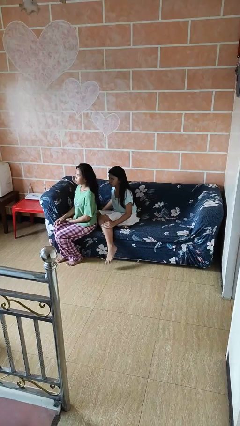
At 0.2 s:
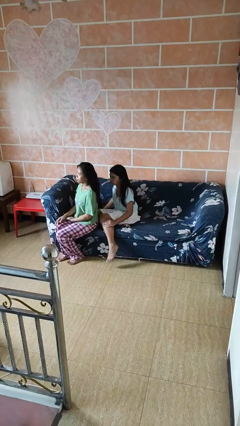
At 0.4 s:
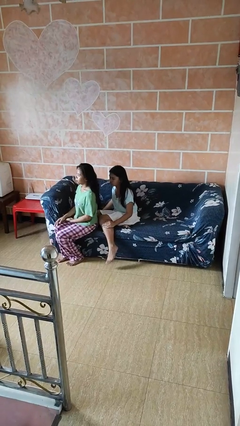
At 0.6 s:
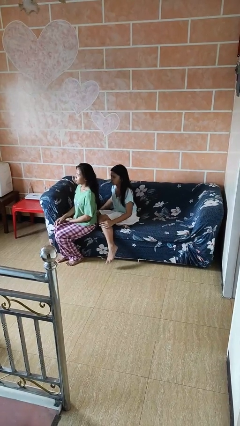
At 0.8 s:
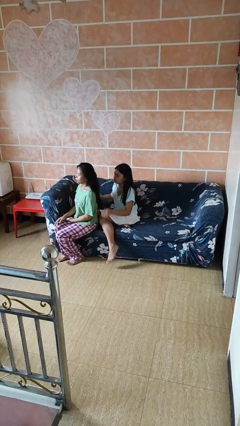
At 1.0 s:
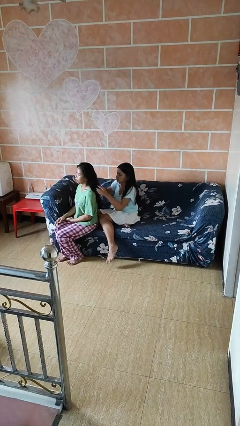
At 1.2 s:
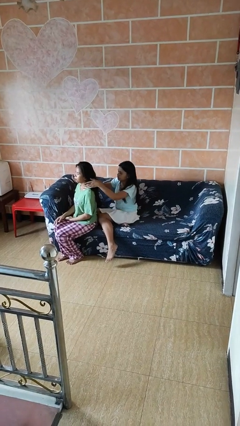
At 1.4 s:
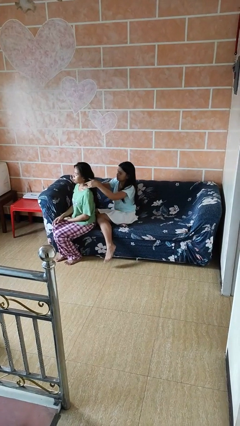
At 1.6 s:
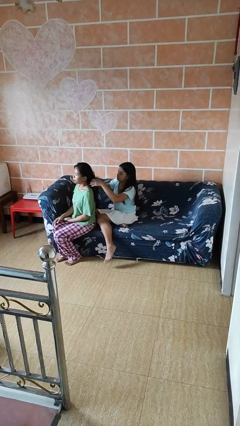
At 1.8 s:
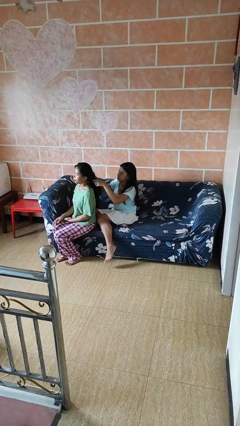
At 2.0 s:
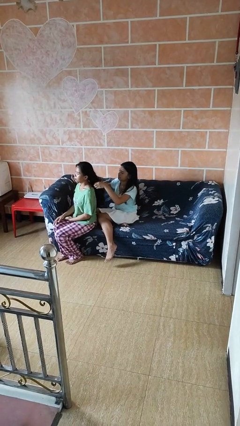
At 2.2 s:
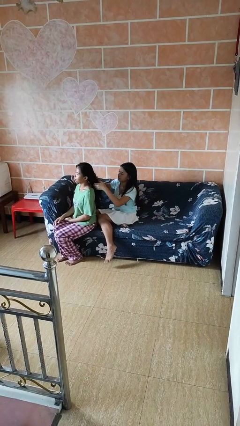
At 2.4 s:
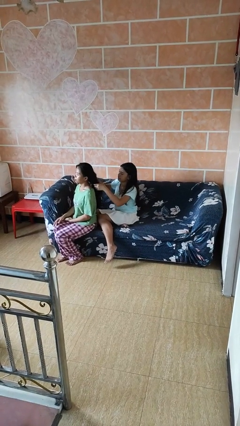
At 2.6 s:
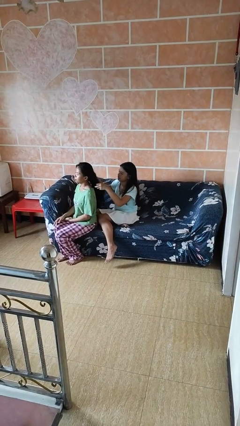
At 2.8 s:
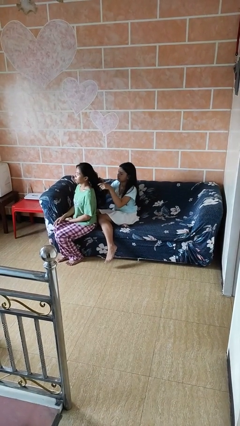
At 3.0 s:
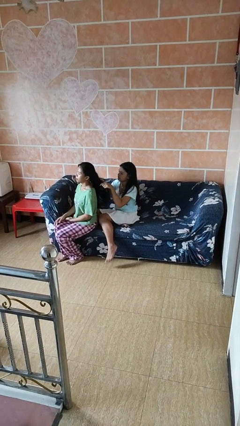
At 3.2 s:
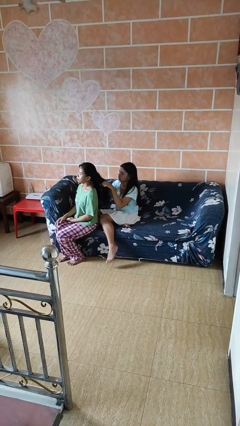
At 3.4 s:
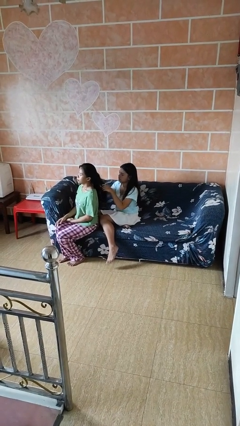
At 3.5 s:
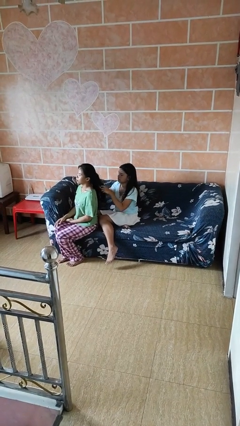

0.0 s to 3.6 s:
person braids hair of person

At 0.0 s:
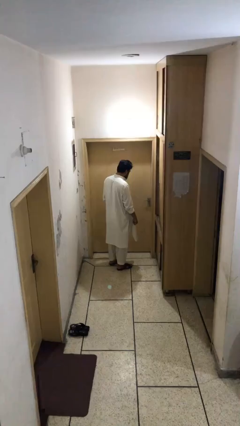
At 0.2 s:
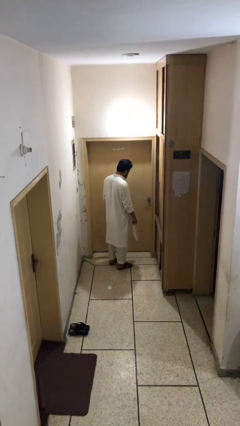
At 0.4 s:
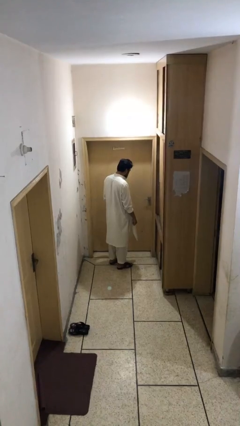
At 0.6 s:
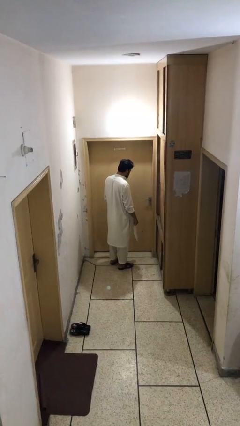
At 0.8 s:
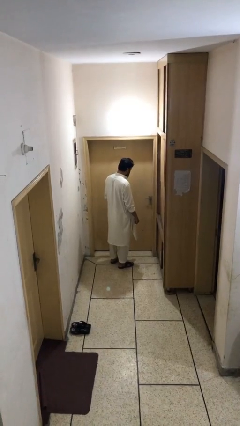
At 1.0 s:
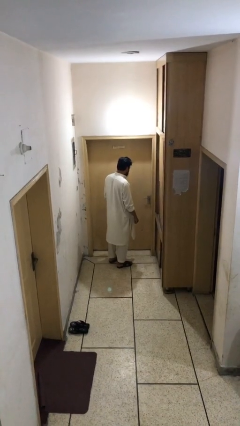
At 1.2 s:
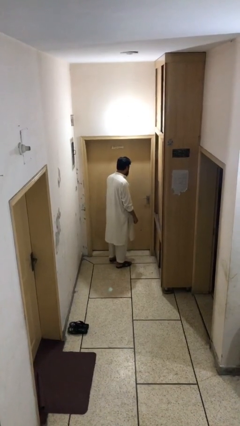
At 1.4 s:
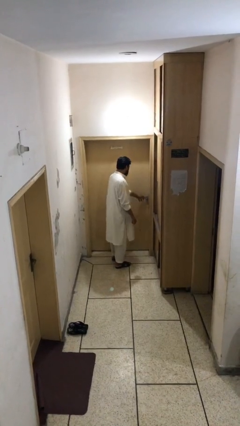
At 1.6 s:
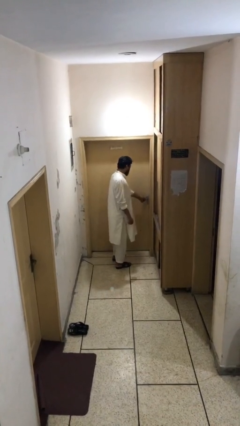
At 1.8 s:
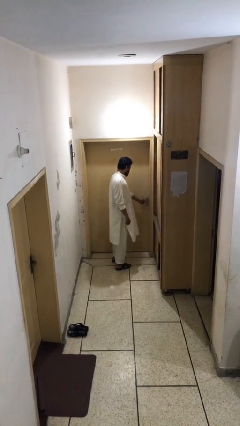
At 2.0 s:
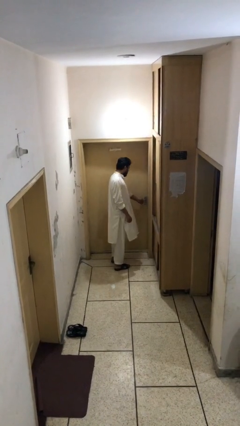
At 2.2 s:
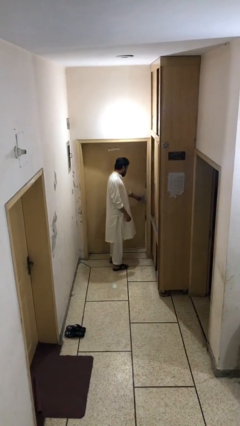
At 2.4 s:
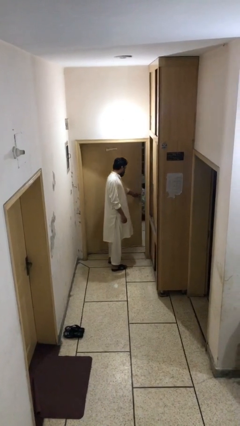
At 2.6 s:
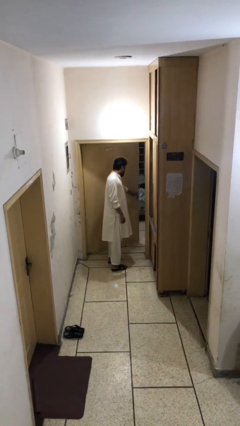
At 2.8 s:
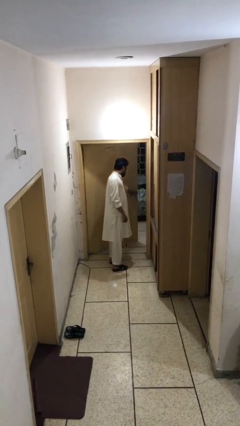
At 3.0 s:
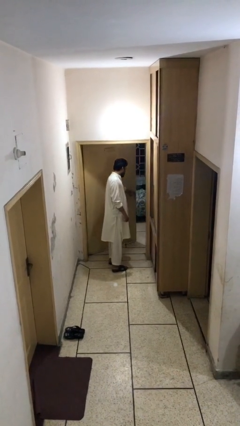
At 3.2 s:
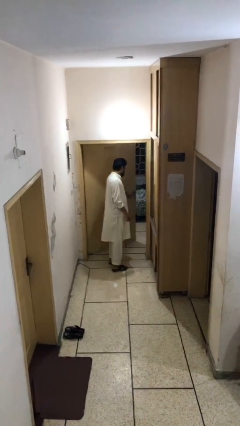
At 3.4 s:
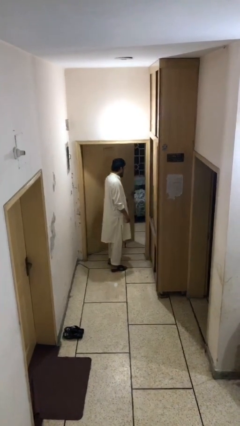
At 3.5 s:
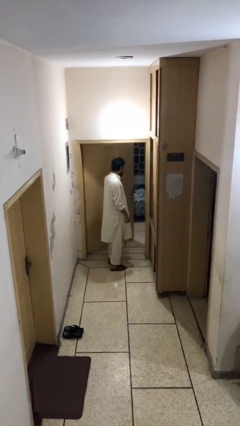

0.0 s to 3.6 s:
person opens facility door

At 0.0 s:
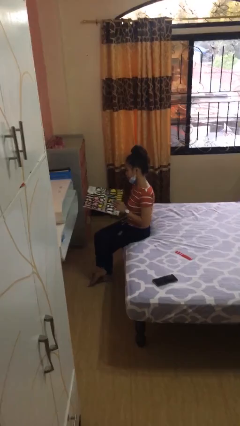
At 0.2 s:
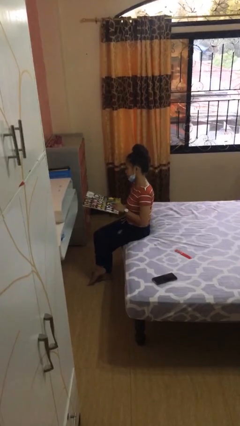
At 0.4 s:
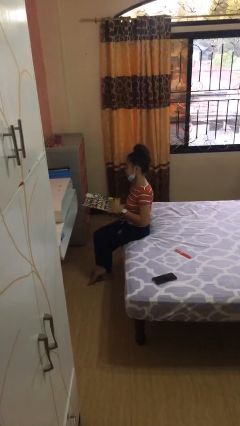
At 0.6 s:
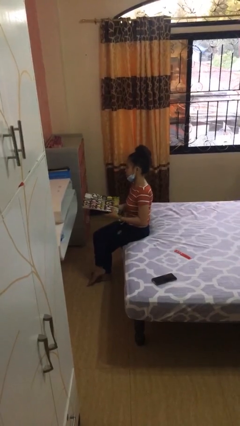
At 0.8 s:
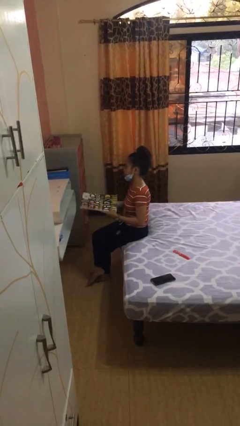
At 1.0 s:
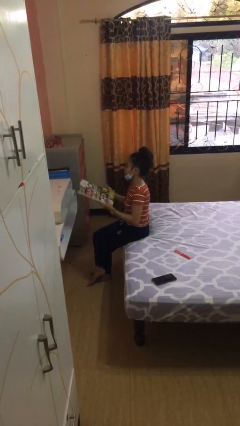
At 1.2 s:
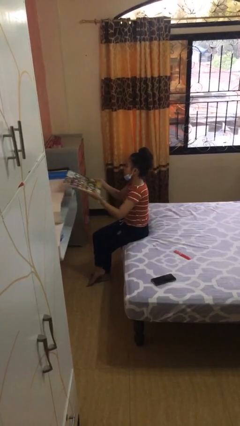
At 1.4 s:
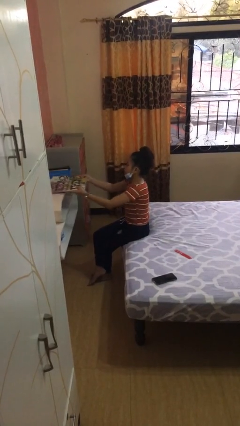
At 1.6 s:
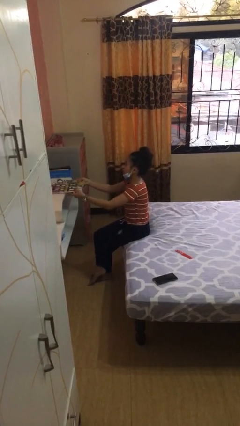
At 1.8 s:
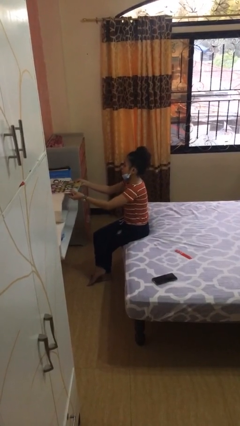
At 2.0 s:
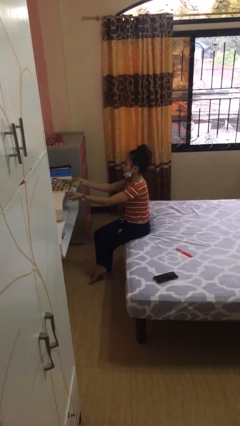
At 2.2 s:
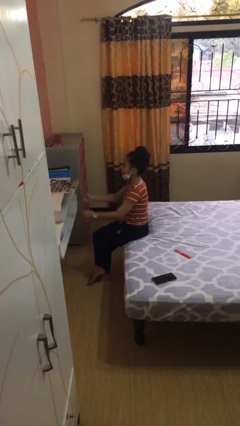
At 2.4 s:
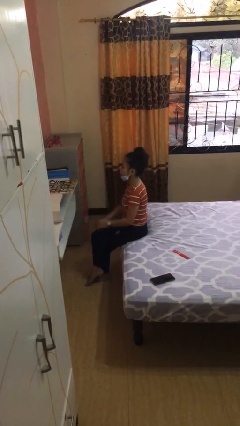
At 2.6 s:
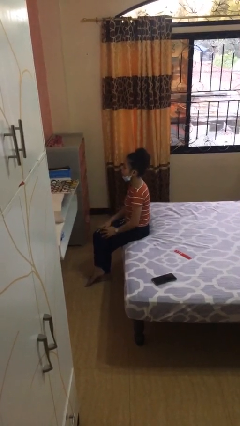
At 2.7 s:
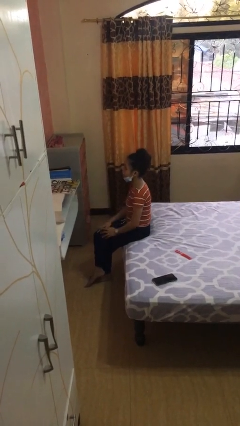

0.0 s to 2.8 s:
person puts down object on table

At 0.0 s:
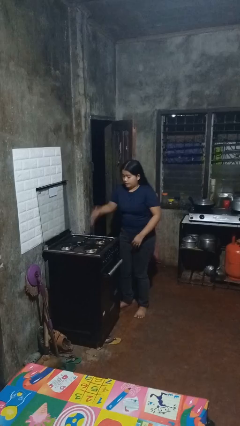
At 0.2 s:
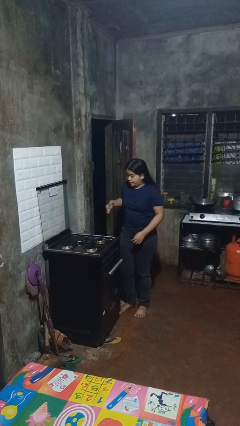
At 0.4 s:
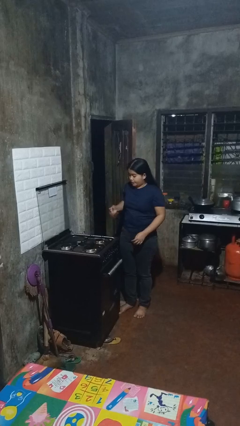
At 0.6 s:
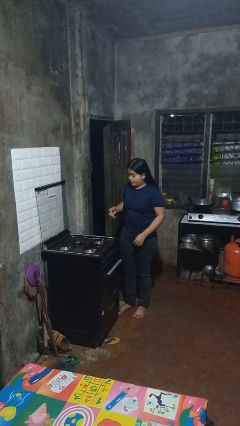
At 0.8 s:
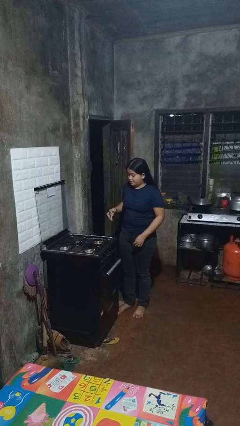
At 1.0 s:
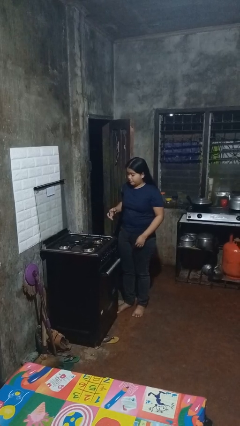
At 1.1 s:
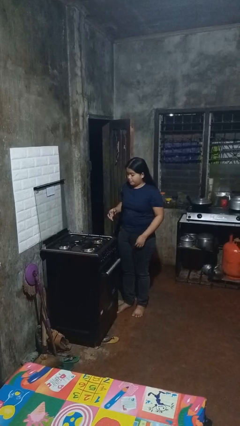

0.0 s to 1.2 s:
person burns hand

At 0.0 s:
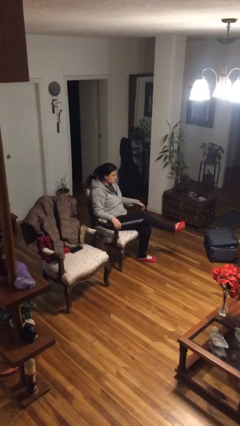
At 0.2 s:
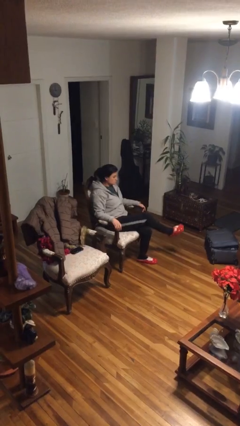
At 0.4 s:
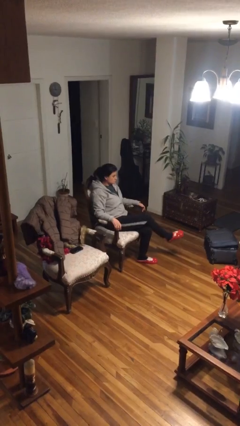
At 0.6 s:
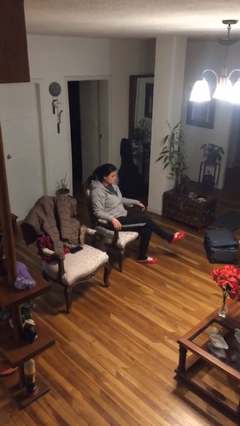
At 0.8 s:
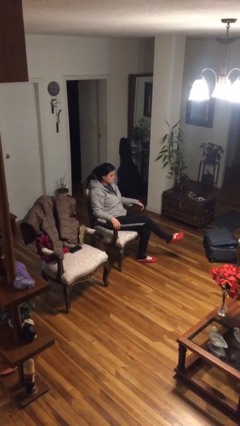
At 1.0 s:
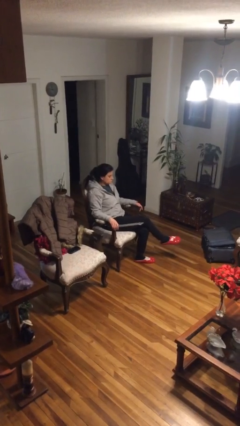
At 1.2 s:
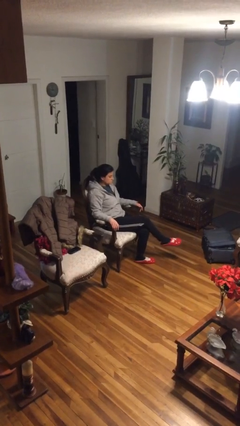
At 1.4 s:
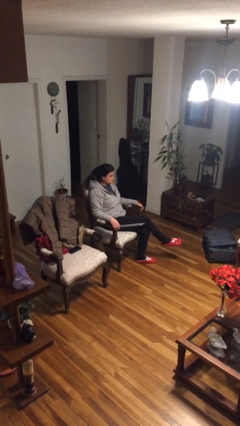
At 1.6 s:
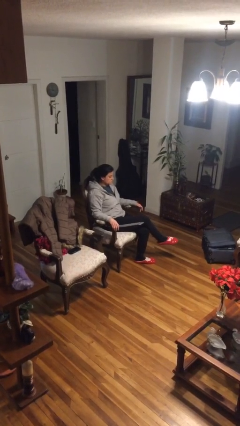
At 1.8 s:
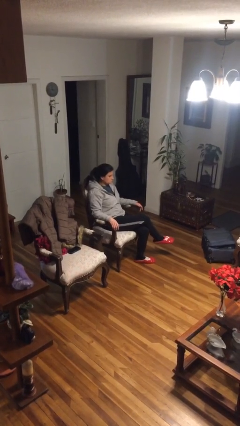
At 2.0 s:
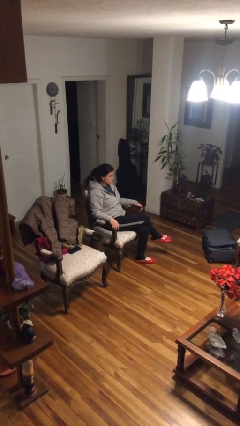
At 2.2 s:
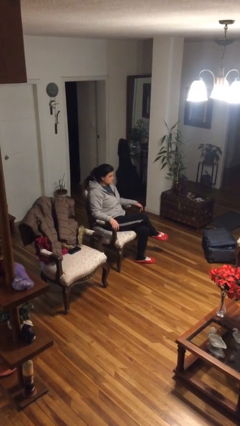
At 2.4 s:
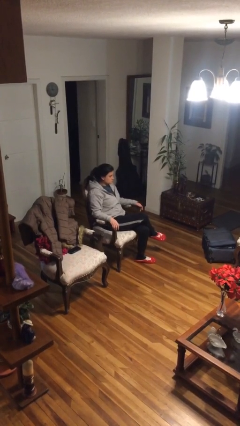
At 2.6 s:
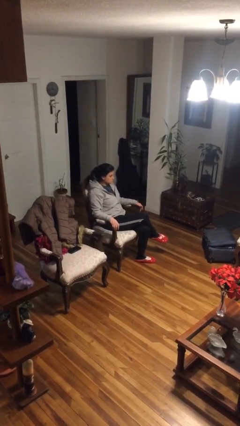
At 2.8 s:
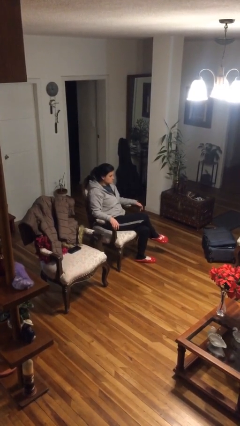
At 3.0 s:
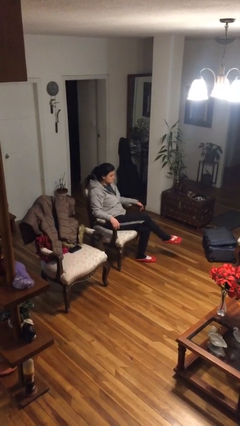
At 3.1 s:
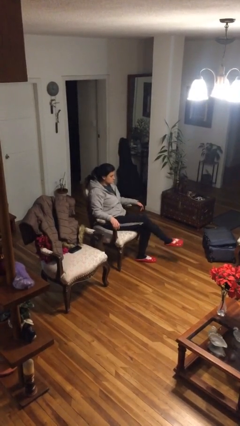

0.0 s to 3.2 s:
person crosses legs

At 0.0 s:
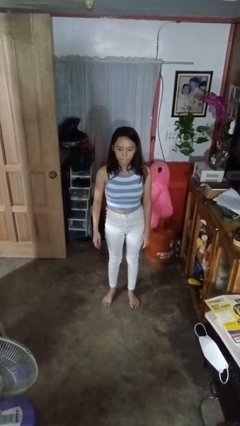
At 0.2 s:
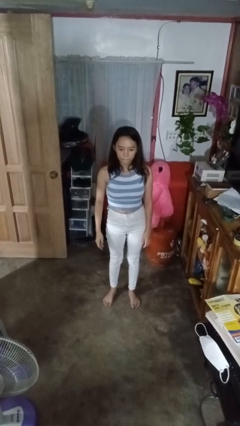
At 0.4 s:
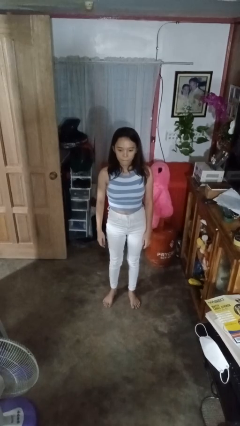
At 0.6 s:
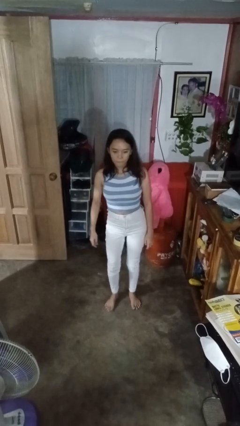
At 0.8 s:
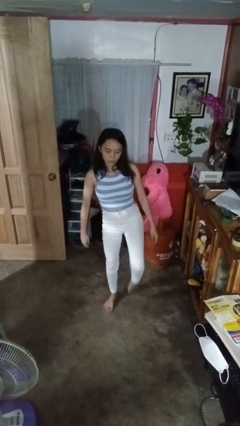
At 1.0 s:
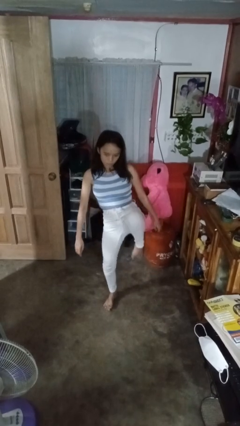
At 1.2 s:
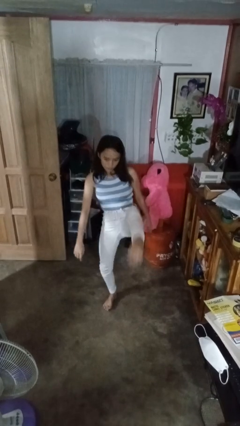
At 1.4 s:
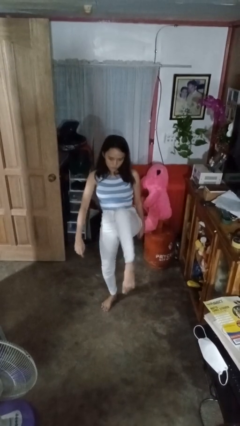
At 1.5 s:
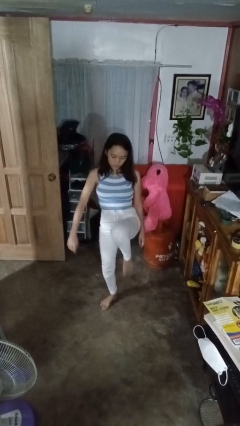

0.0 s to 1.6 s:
person karate kicks

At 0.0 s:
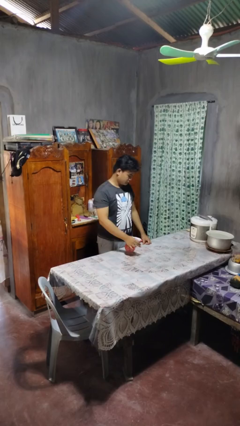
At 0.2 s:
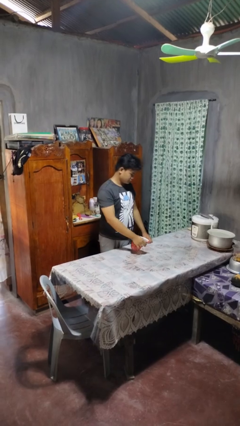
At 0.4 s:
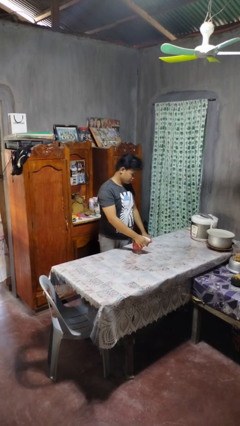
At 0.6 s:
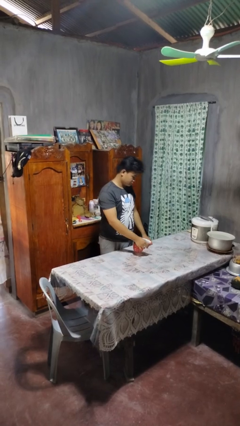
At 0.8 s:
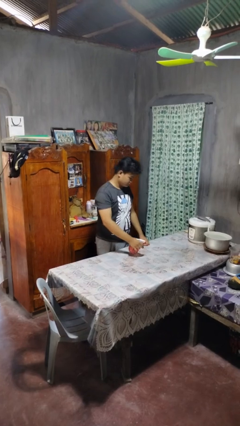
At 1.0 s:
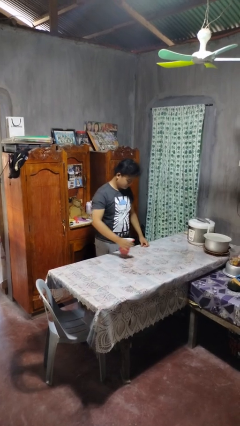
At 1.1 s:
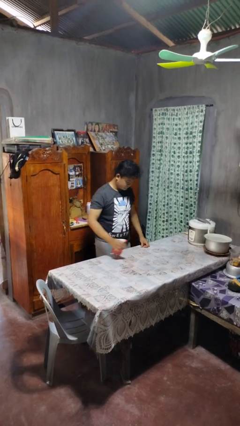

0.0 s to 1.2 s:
person sprays from bottle

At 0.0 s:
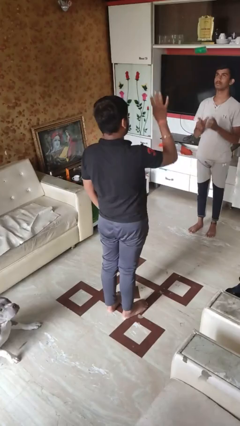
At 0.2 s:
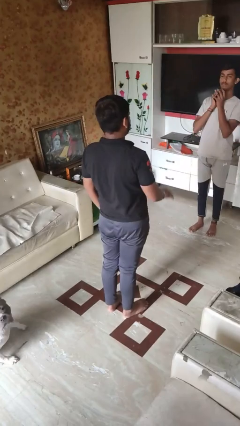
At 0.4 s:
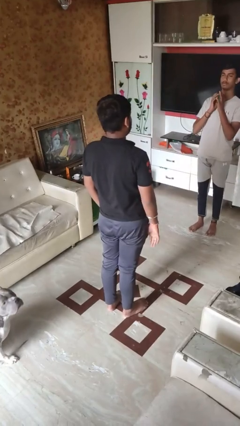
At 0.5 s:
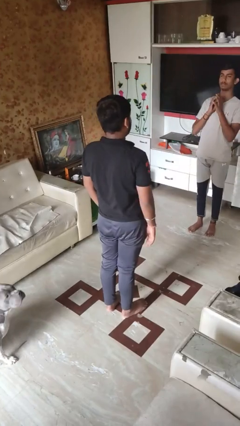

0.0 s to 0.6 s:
person throws object to person
